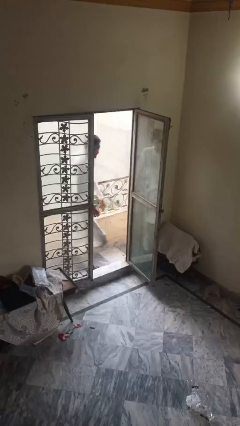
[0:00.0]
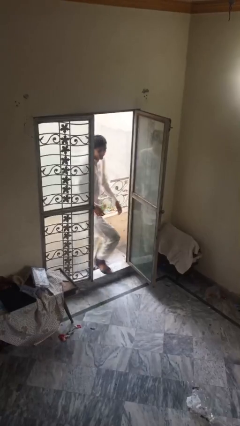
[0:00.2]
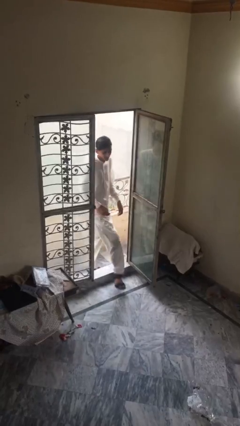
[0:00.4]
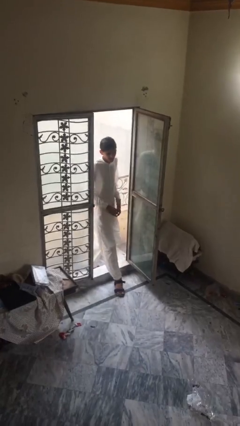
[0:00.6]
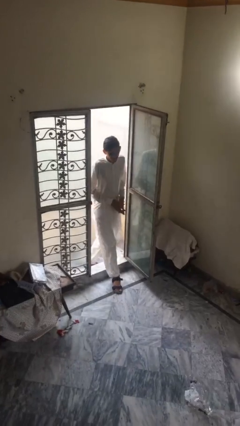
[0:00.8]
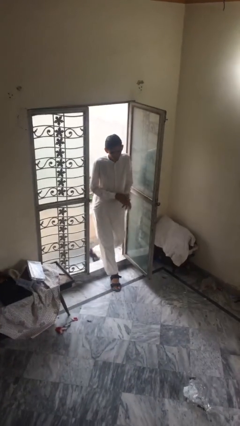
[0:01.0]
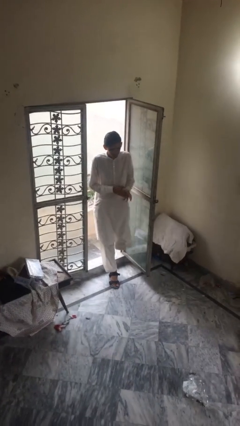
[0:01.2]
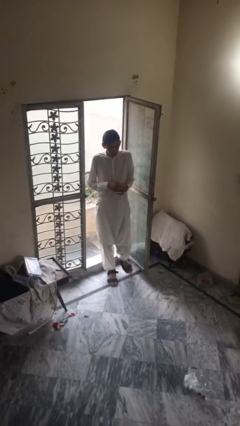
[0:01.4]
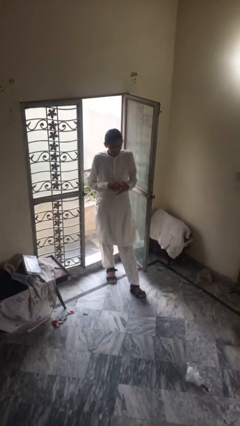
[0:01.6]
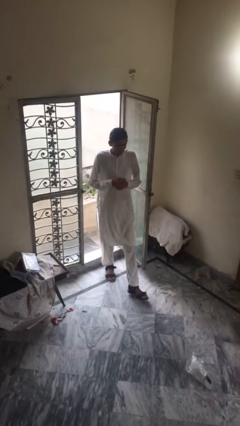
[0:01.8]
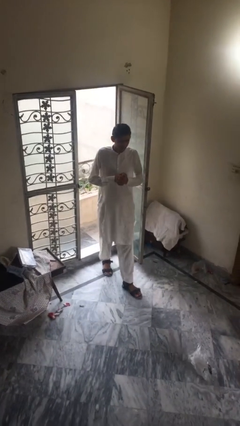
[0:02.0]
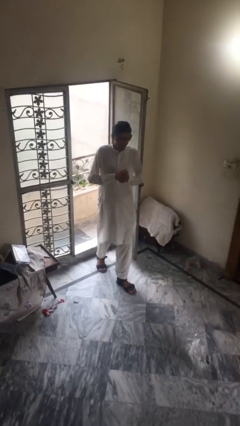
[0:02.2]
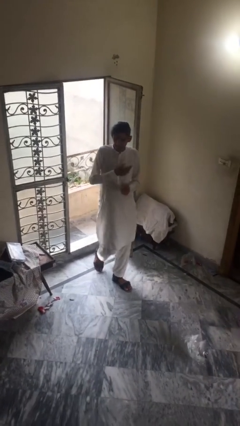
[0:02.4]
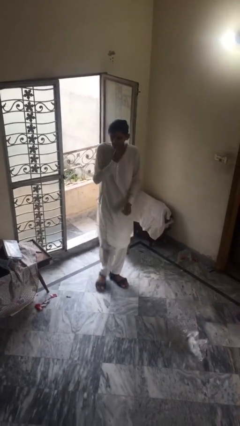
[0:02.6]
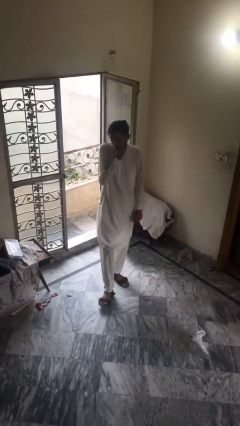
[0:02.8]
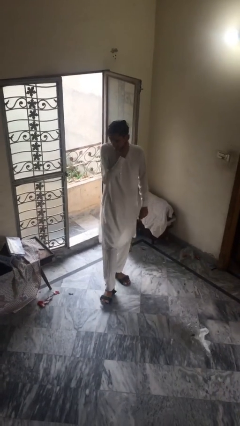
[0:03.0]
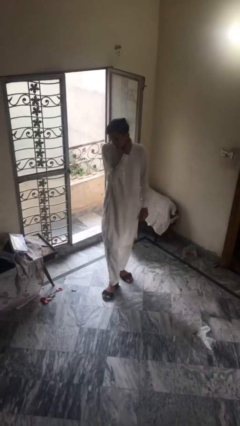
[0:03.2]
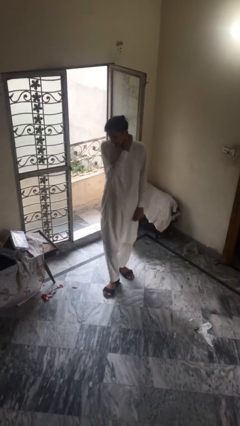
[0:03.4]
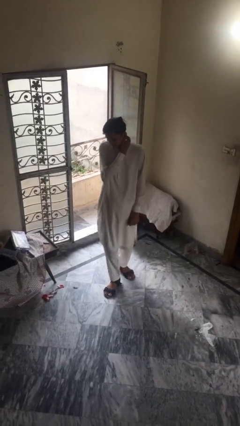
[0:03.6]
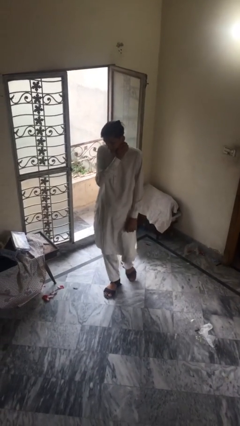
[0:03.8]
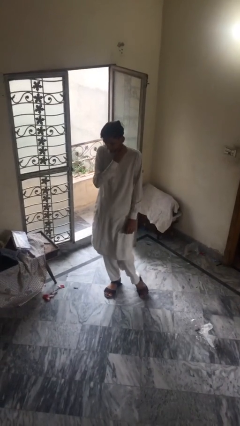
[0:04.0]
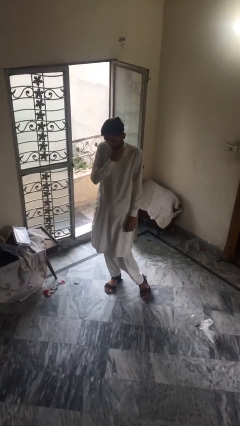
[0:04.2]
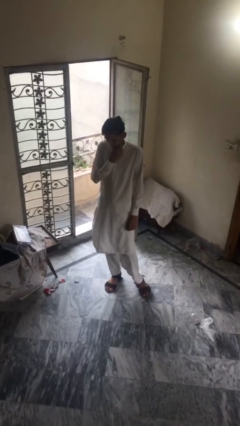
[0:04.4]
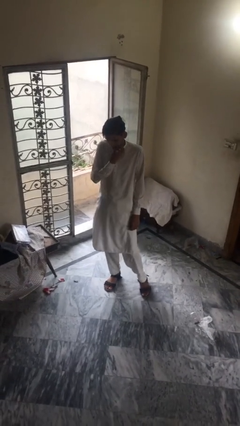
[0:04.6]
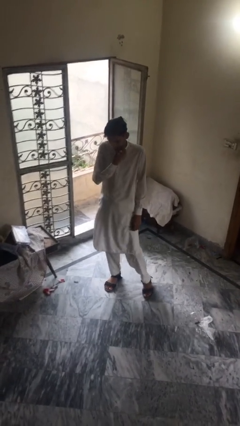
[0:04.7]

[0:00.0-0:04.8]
person enters scene through structure

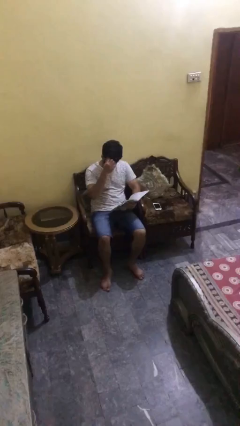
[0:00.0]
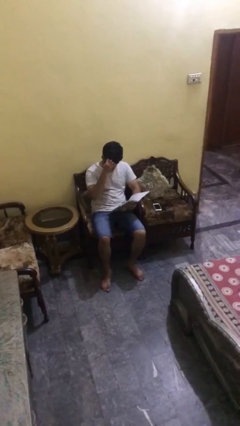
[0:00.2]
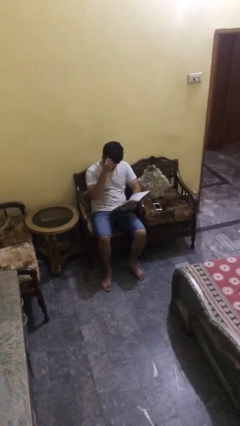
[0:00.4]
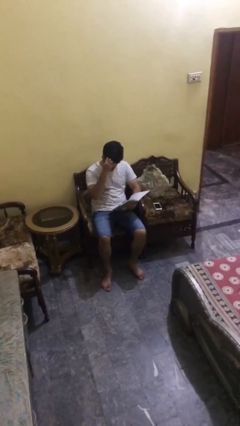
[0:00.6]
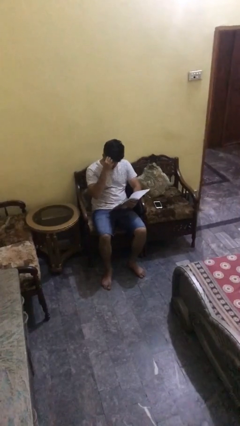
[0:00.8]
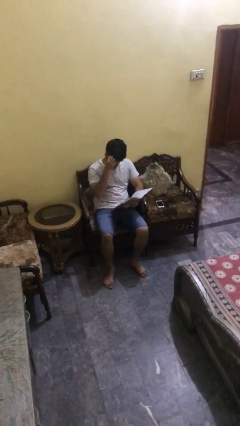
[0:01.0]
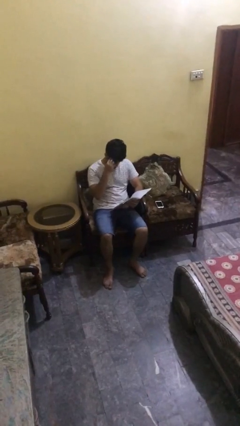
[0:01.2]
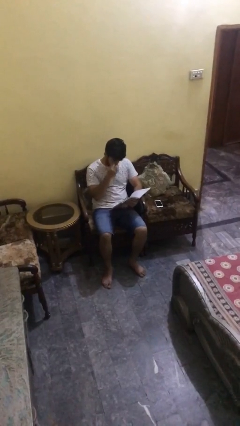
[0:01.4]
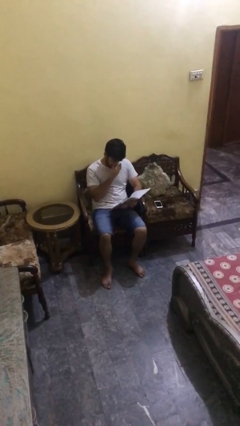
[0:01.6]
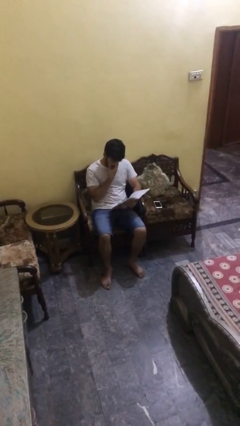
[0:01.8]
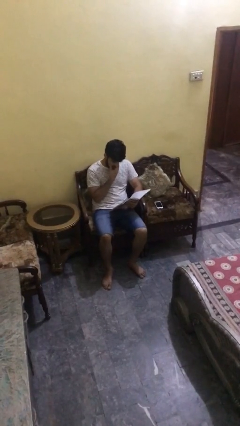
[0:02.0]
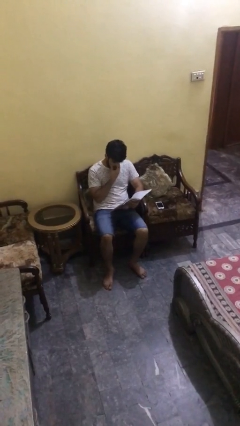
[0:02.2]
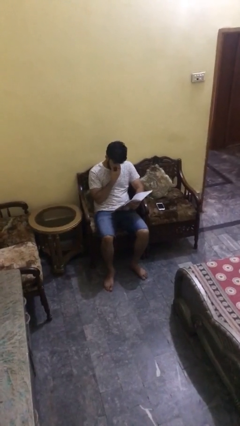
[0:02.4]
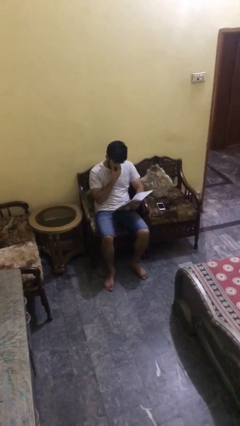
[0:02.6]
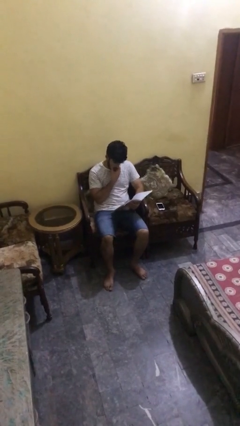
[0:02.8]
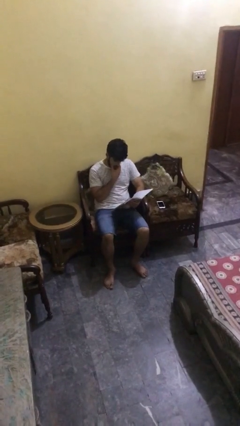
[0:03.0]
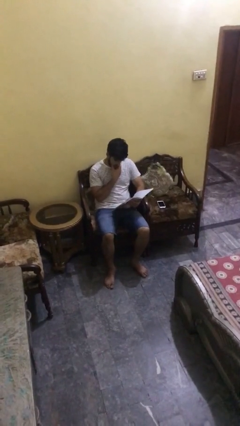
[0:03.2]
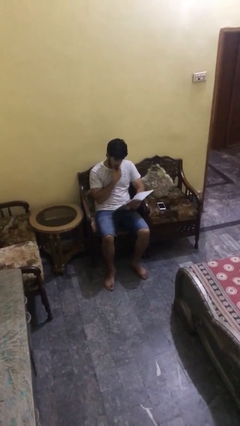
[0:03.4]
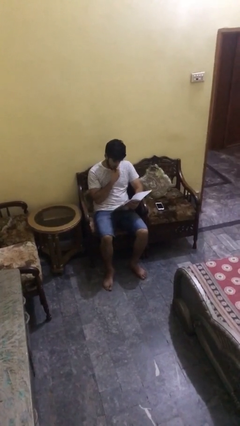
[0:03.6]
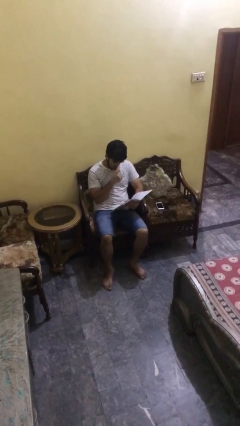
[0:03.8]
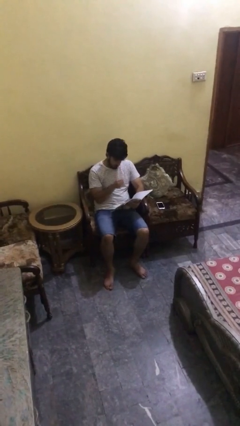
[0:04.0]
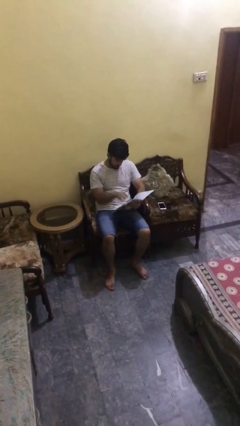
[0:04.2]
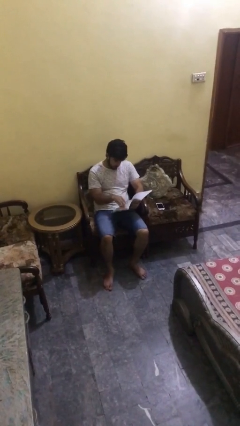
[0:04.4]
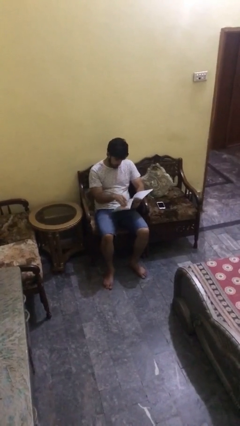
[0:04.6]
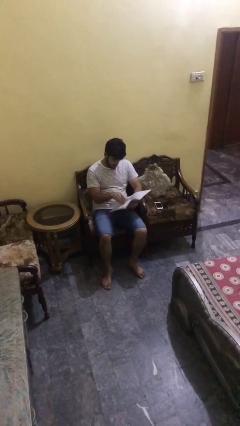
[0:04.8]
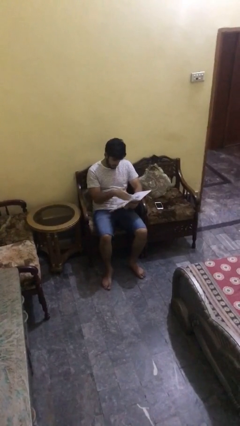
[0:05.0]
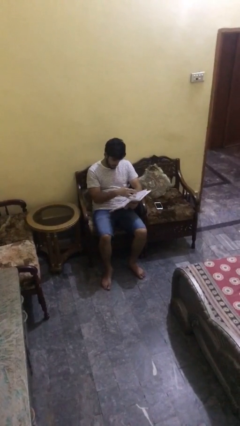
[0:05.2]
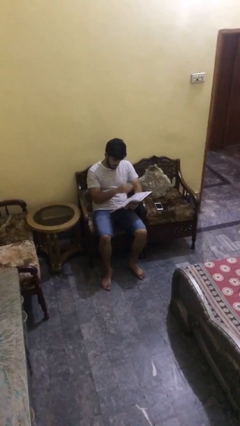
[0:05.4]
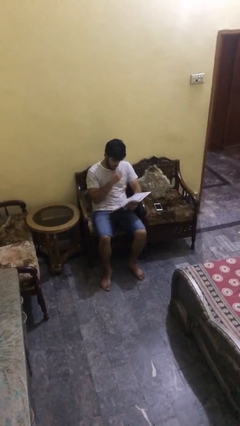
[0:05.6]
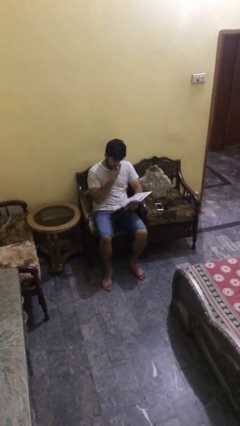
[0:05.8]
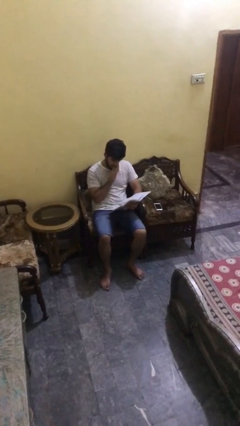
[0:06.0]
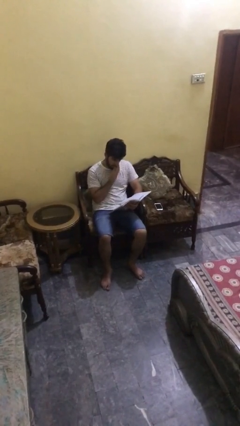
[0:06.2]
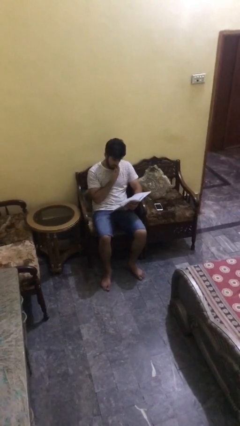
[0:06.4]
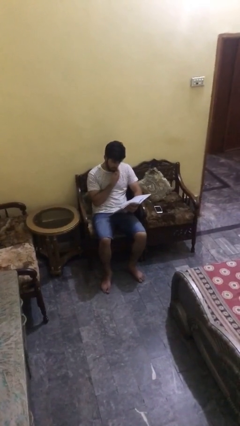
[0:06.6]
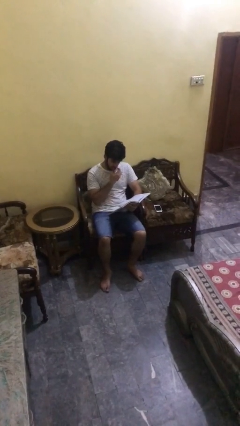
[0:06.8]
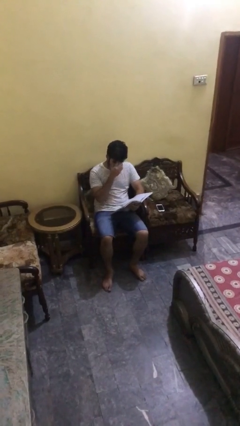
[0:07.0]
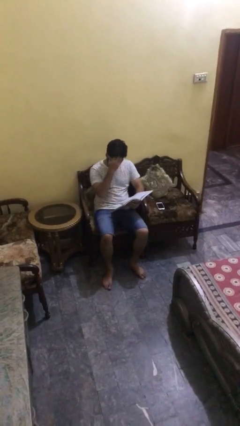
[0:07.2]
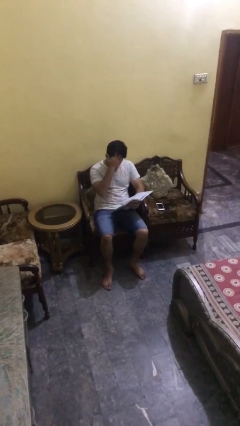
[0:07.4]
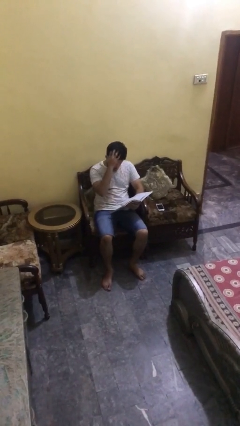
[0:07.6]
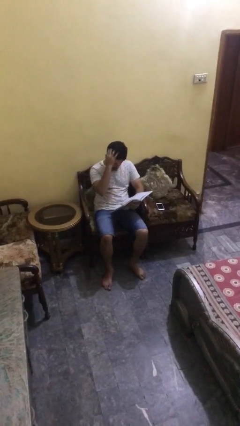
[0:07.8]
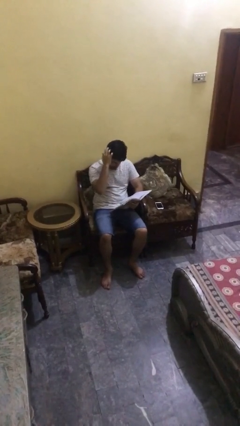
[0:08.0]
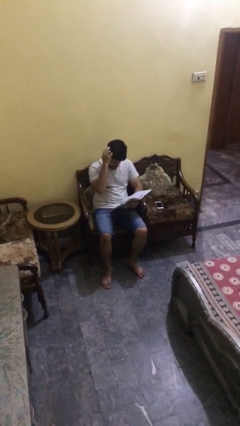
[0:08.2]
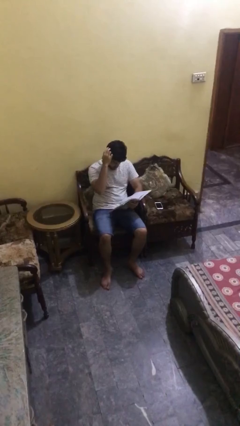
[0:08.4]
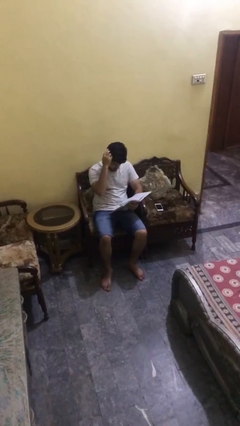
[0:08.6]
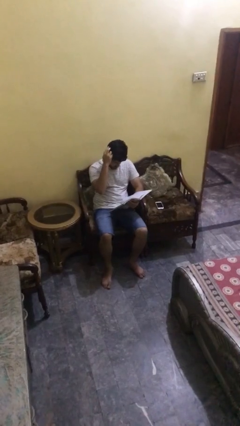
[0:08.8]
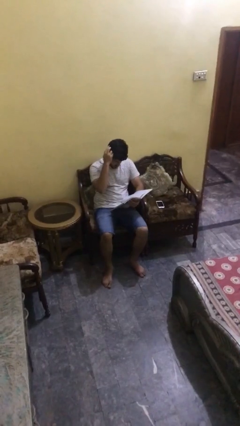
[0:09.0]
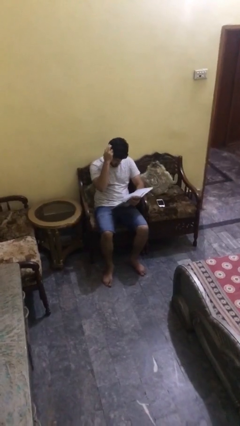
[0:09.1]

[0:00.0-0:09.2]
person reads document

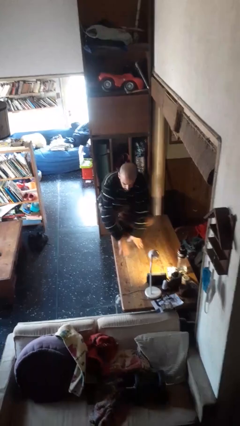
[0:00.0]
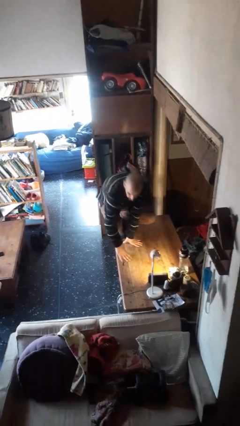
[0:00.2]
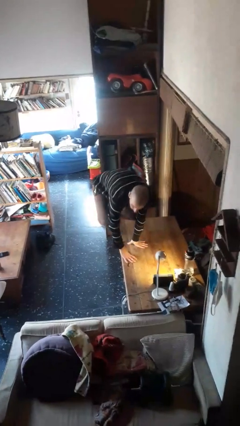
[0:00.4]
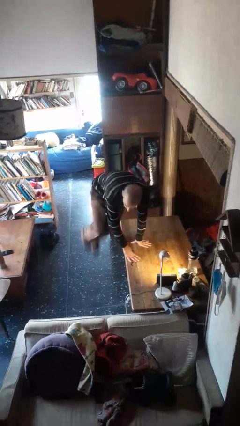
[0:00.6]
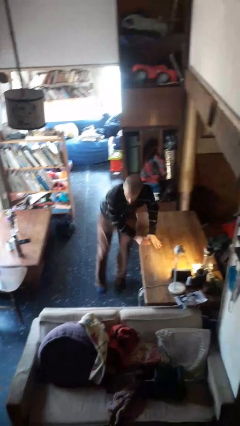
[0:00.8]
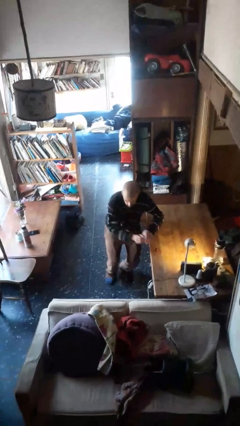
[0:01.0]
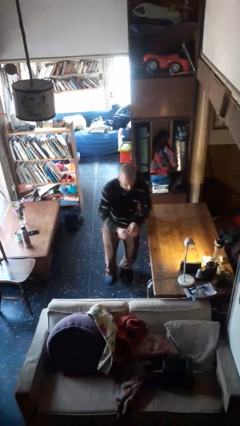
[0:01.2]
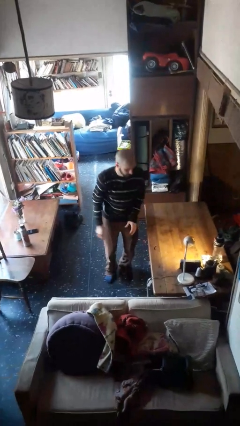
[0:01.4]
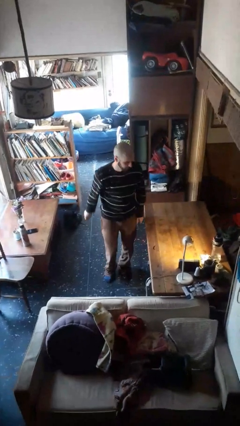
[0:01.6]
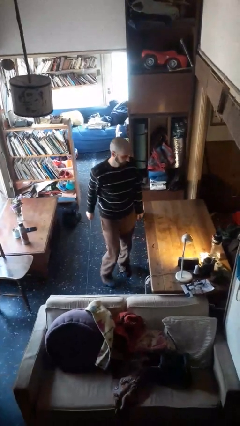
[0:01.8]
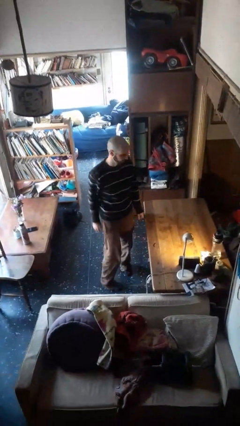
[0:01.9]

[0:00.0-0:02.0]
person climbs off table

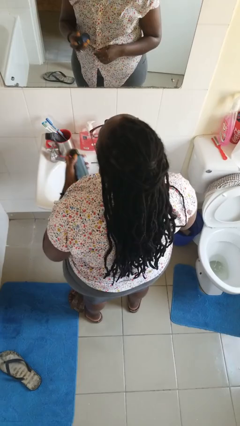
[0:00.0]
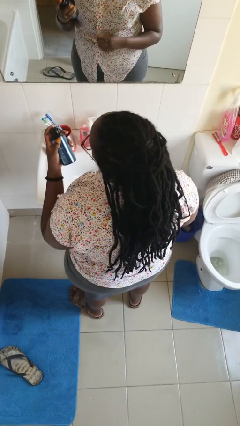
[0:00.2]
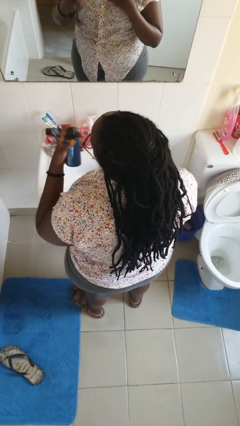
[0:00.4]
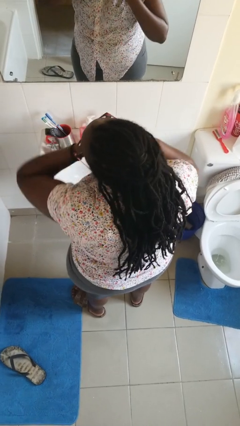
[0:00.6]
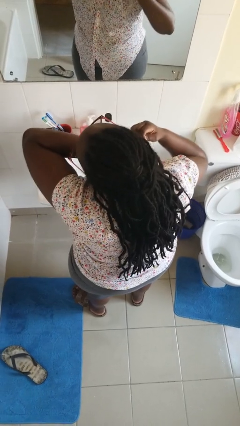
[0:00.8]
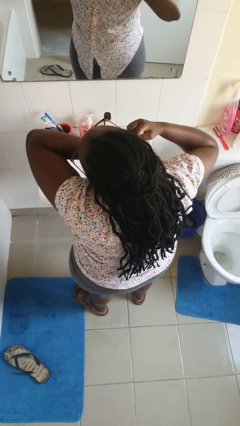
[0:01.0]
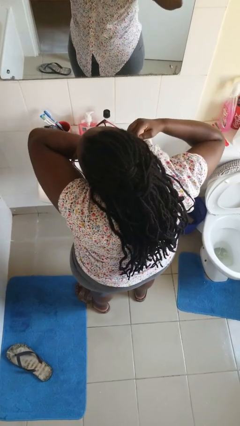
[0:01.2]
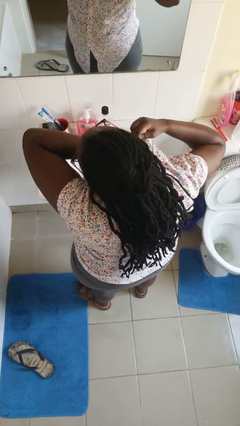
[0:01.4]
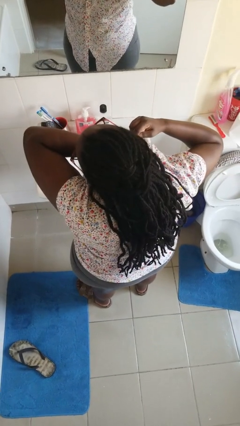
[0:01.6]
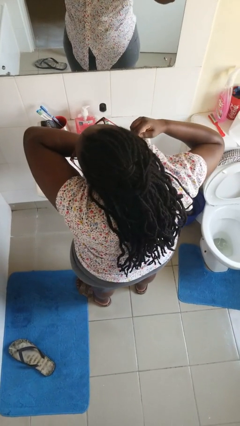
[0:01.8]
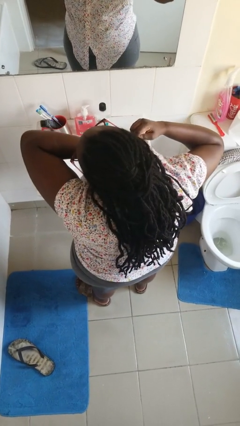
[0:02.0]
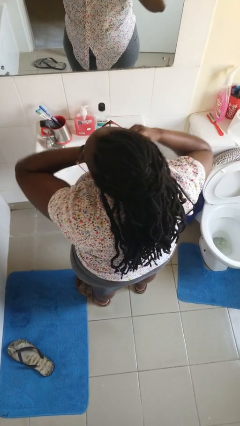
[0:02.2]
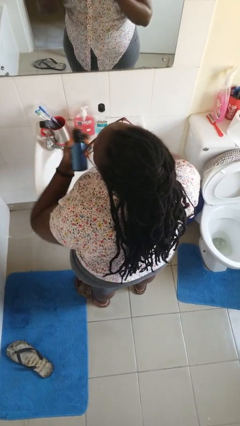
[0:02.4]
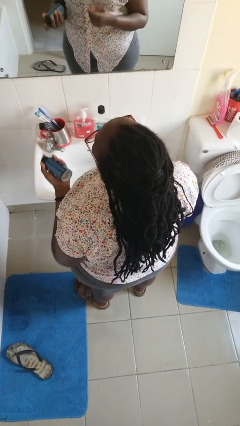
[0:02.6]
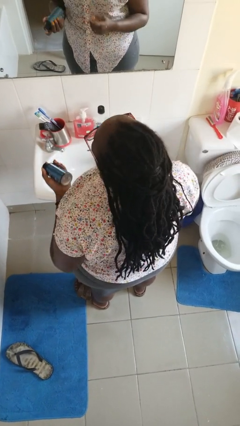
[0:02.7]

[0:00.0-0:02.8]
person applies deodorant
